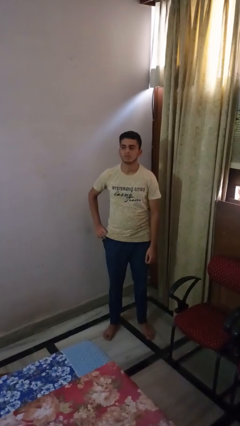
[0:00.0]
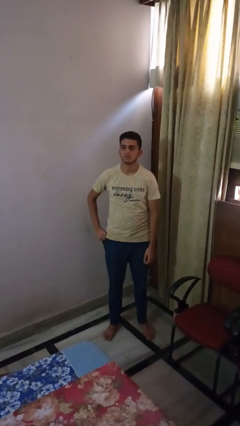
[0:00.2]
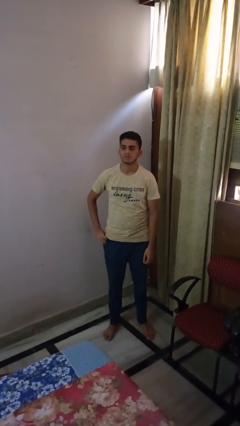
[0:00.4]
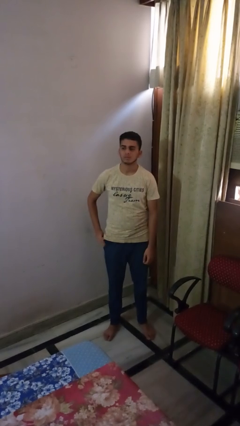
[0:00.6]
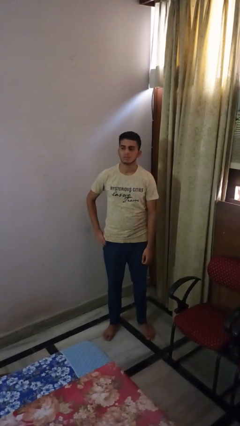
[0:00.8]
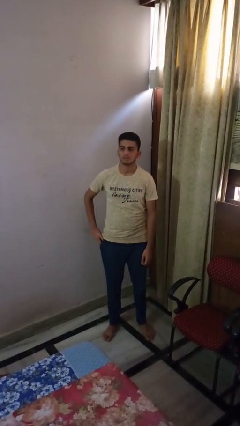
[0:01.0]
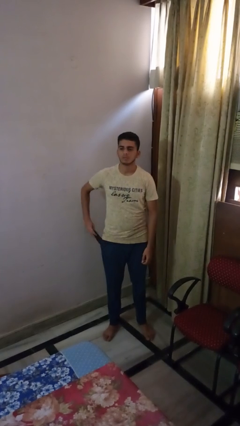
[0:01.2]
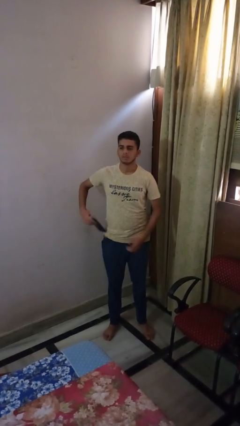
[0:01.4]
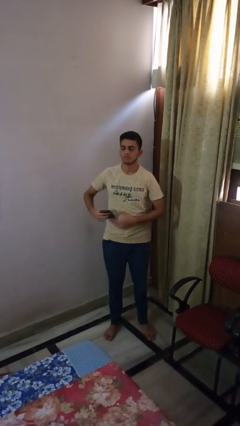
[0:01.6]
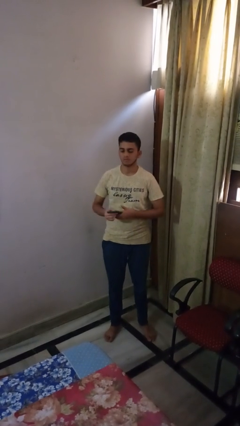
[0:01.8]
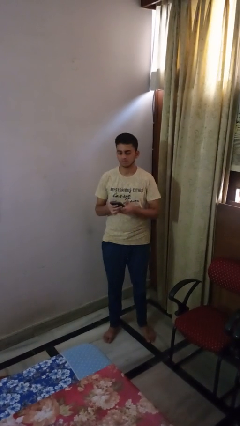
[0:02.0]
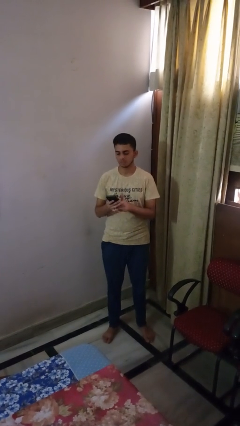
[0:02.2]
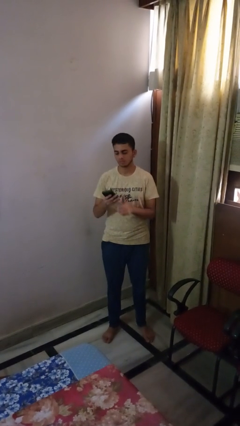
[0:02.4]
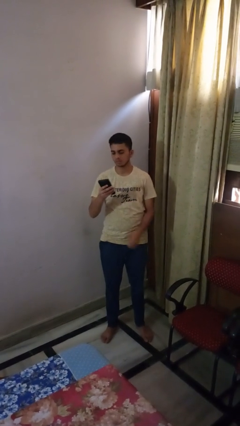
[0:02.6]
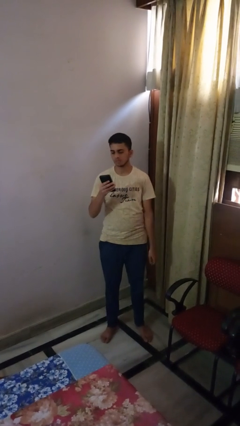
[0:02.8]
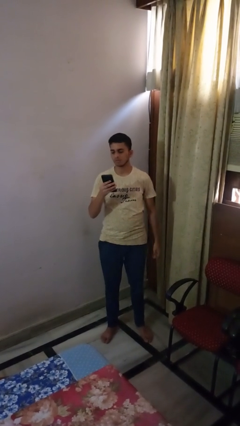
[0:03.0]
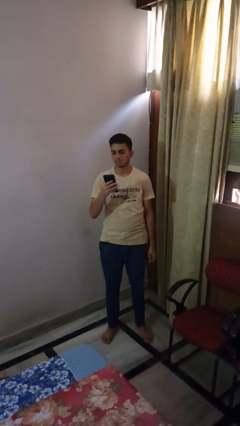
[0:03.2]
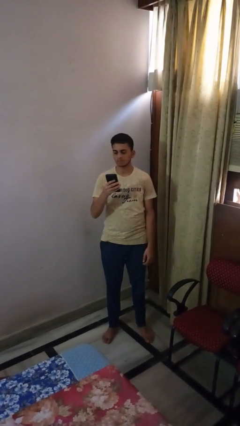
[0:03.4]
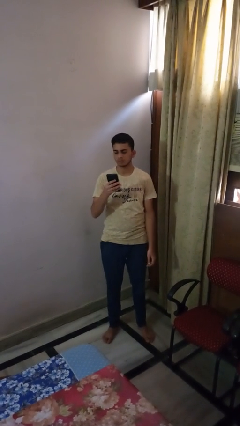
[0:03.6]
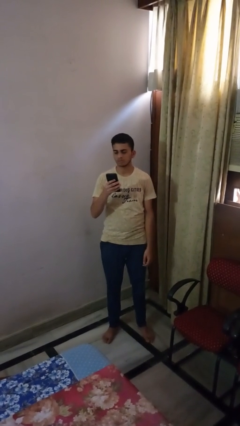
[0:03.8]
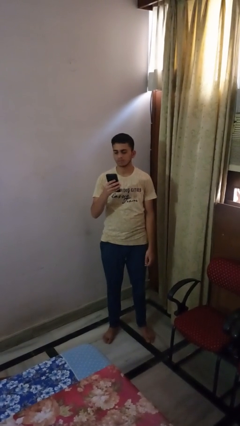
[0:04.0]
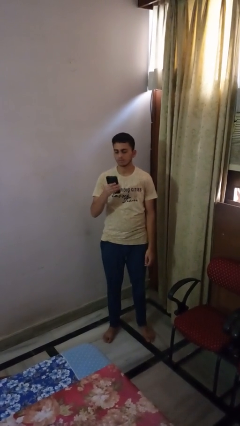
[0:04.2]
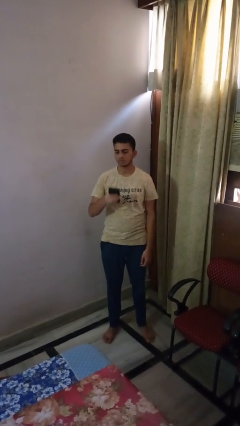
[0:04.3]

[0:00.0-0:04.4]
person takes phone from pocket

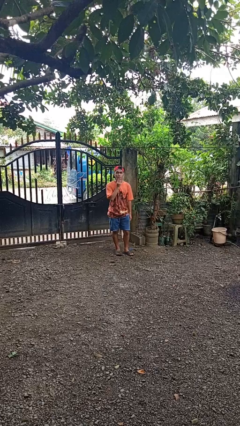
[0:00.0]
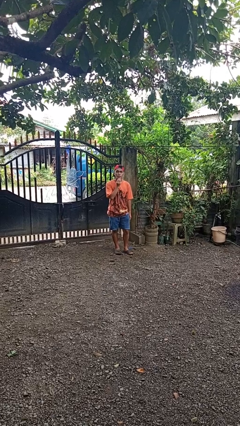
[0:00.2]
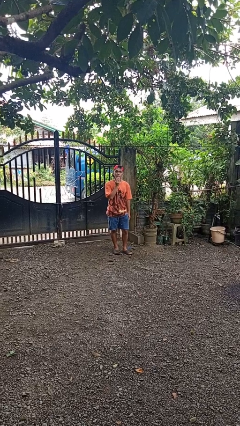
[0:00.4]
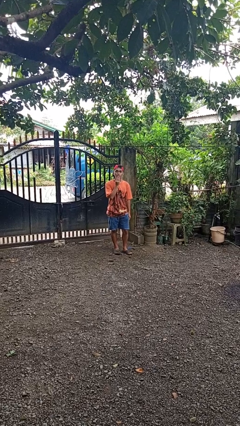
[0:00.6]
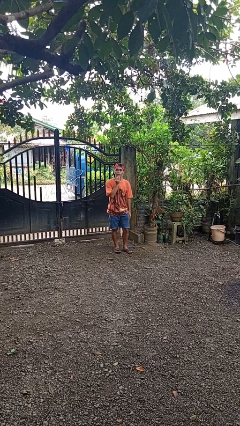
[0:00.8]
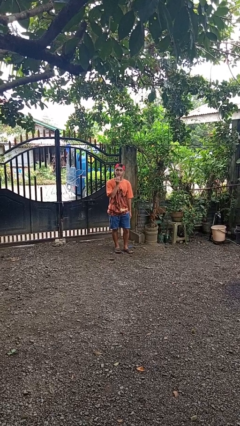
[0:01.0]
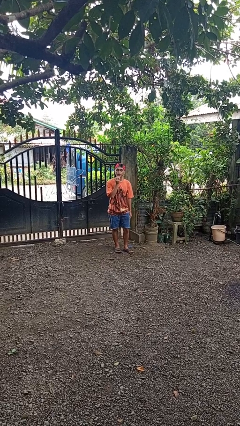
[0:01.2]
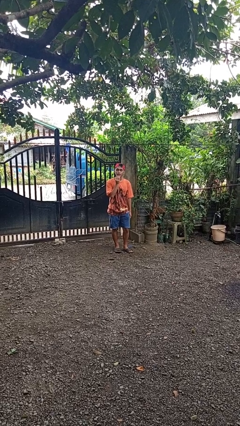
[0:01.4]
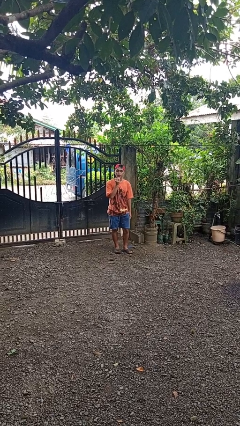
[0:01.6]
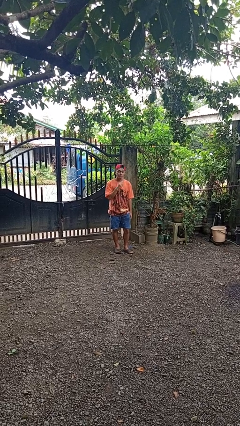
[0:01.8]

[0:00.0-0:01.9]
person strokes chin

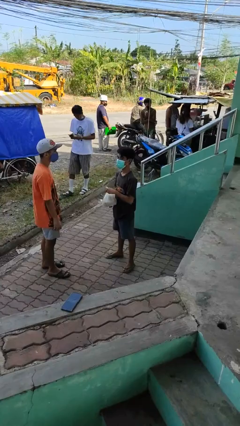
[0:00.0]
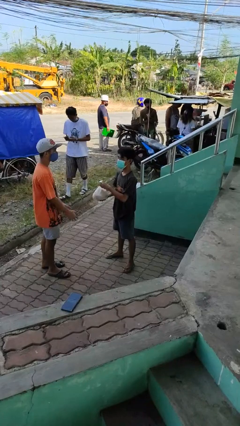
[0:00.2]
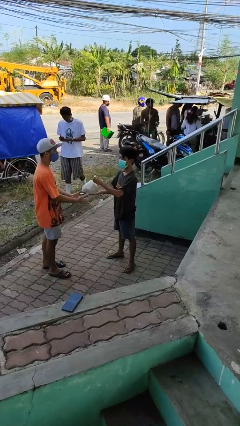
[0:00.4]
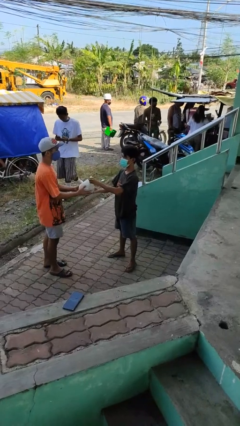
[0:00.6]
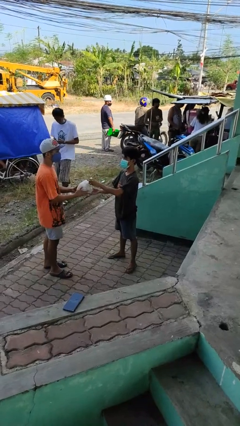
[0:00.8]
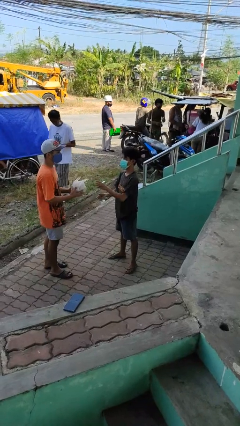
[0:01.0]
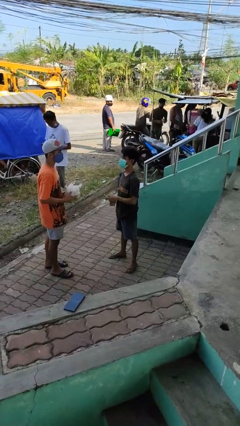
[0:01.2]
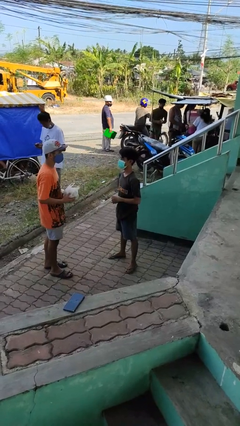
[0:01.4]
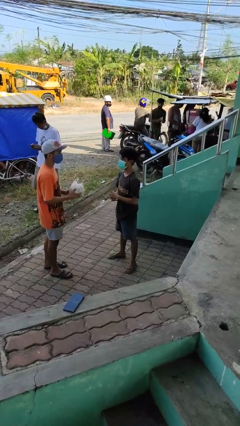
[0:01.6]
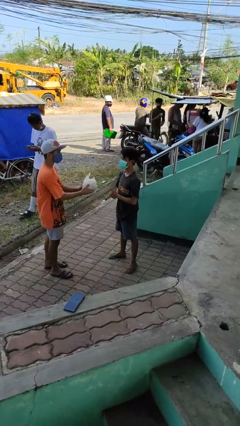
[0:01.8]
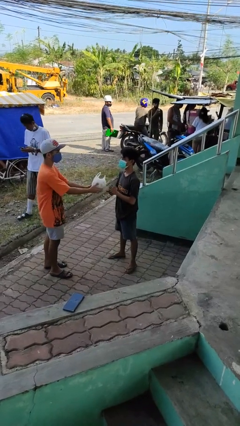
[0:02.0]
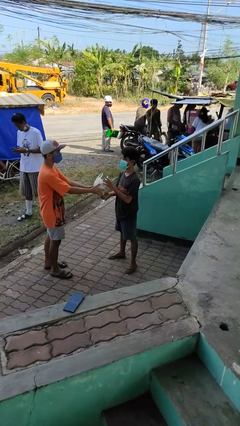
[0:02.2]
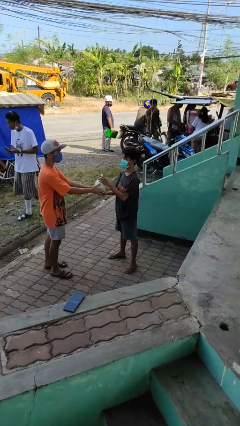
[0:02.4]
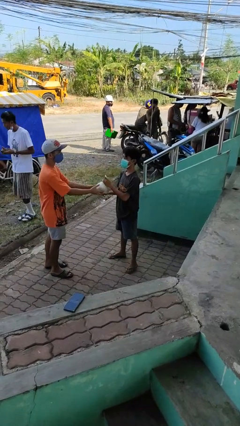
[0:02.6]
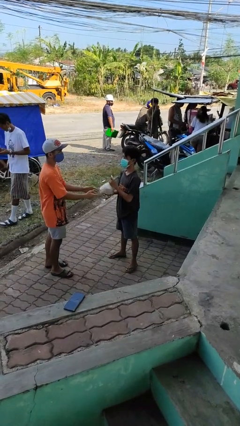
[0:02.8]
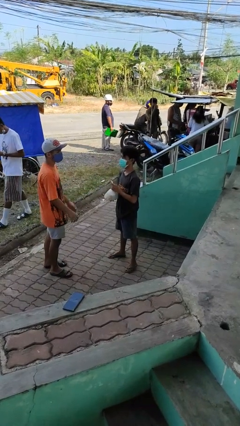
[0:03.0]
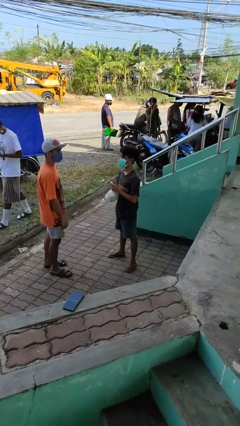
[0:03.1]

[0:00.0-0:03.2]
person transfers object to person

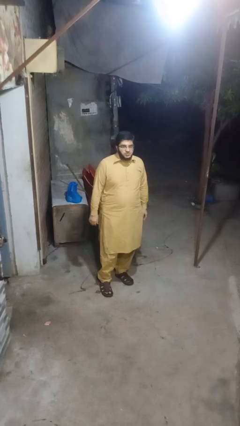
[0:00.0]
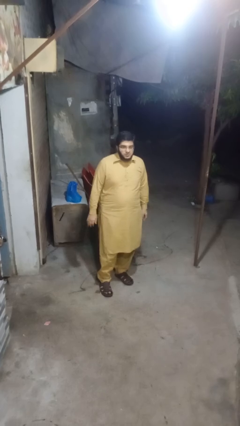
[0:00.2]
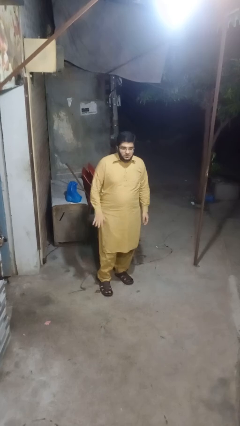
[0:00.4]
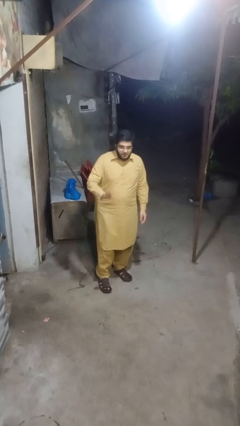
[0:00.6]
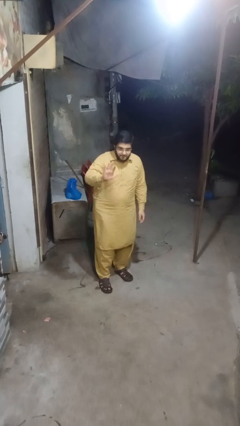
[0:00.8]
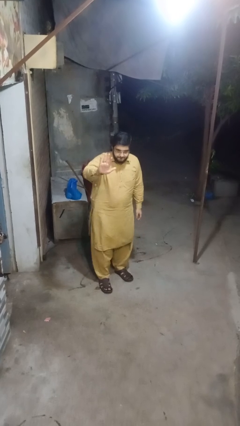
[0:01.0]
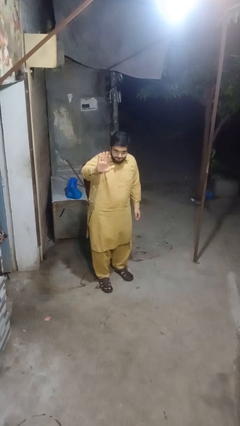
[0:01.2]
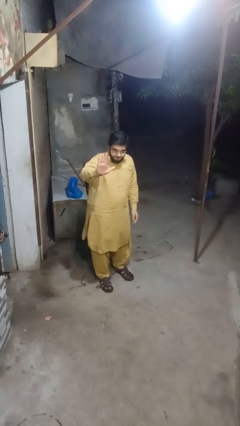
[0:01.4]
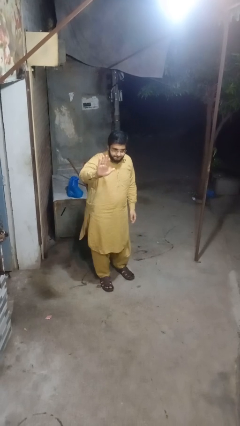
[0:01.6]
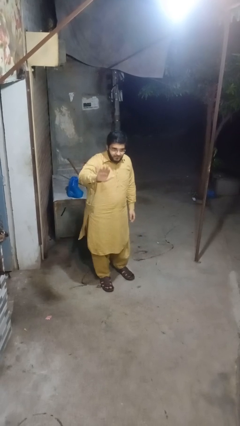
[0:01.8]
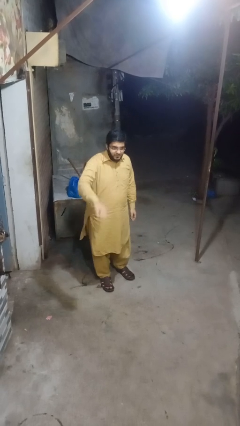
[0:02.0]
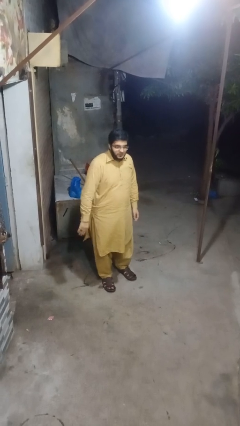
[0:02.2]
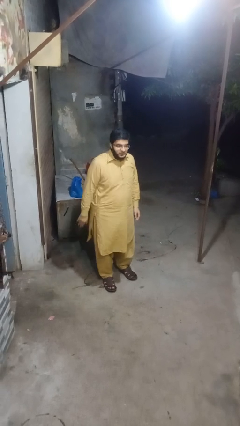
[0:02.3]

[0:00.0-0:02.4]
person gestures stop

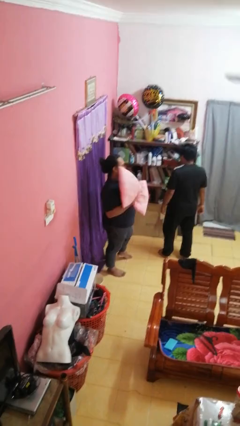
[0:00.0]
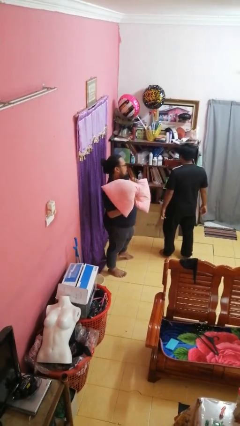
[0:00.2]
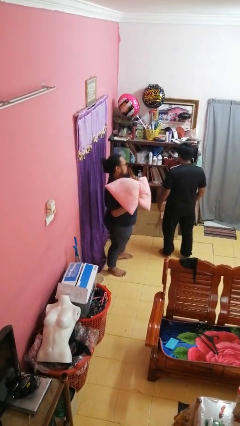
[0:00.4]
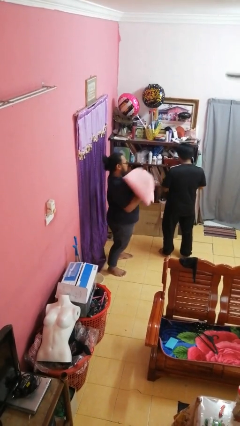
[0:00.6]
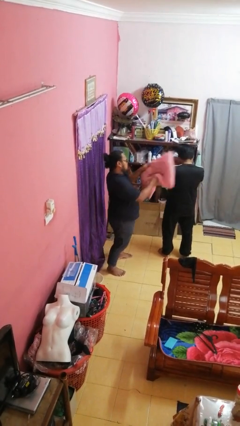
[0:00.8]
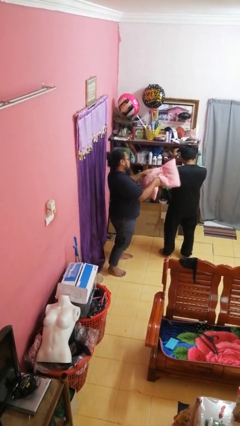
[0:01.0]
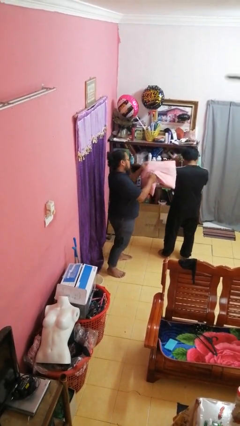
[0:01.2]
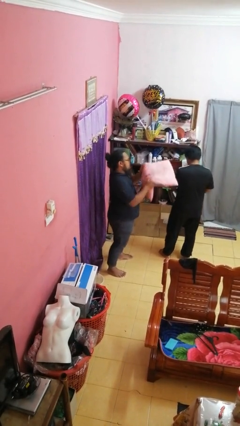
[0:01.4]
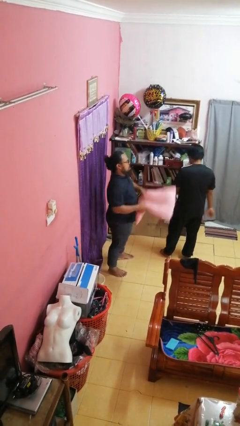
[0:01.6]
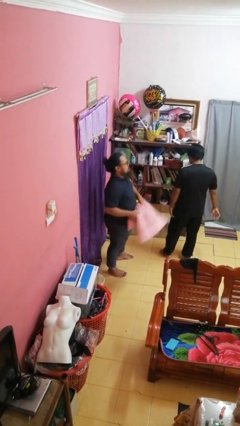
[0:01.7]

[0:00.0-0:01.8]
person hits person with pillow

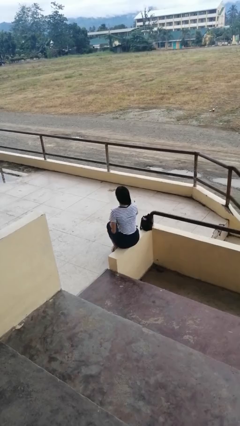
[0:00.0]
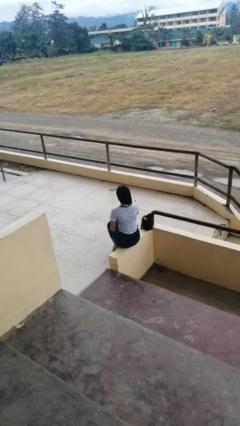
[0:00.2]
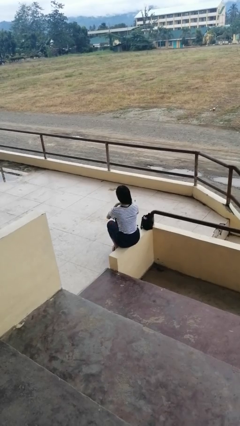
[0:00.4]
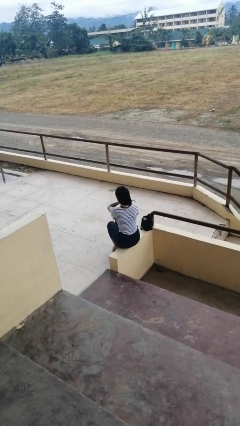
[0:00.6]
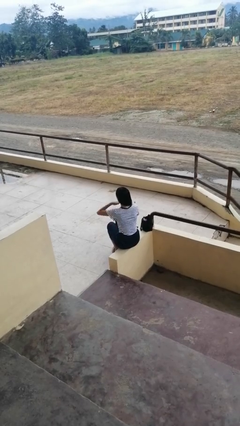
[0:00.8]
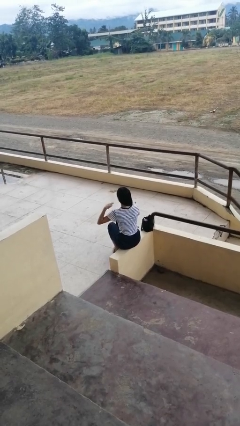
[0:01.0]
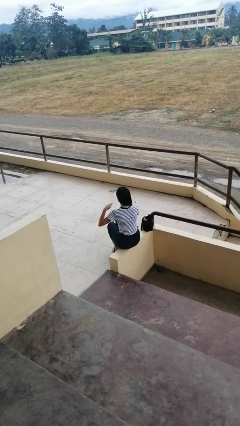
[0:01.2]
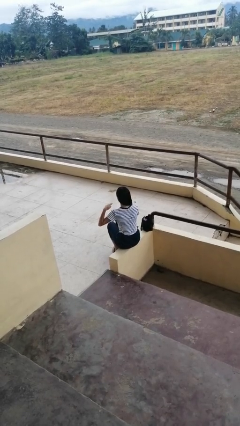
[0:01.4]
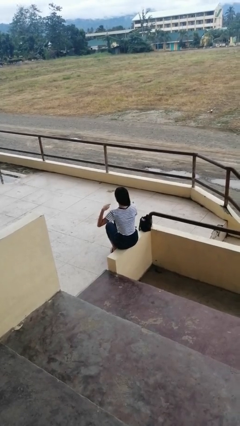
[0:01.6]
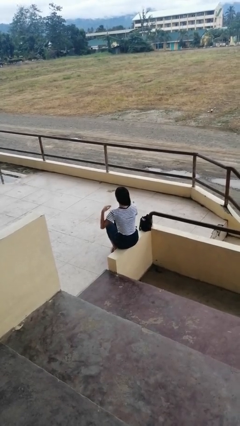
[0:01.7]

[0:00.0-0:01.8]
person gestures cut

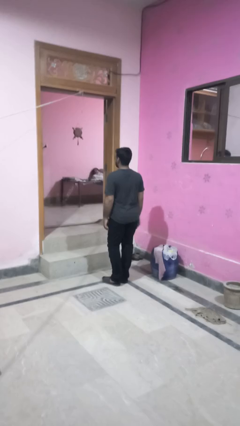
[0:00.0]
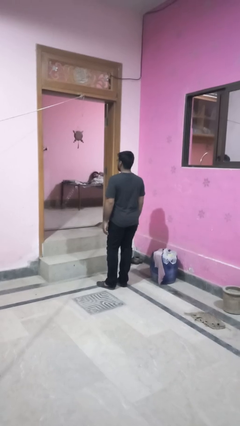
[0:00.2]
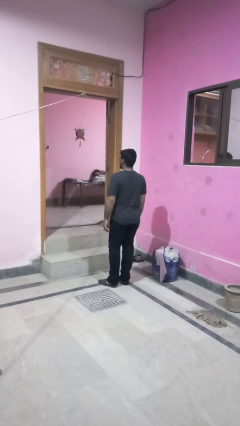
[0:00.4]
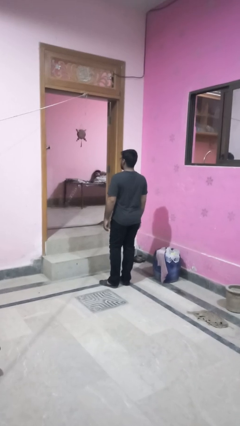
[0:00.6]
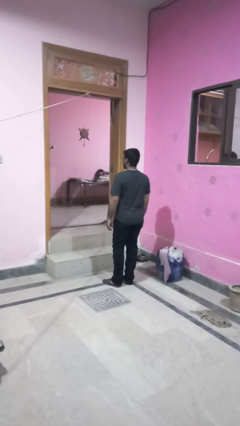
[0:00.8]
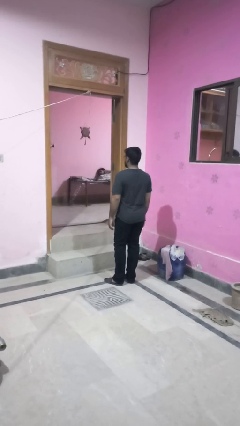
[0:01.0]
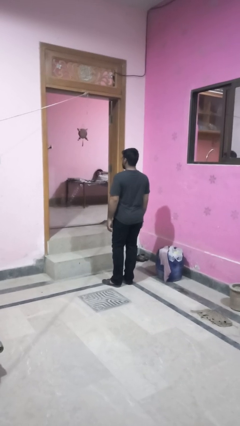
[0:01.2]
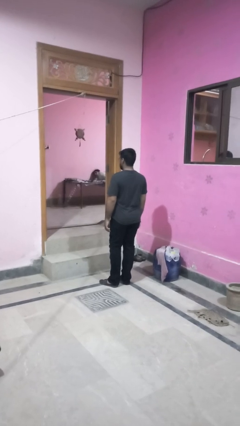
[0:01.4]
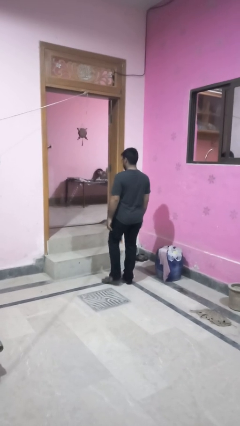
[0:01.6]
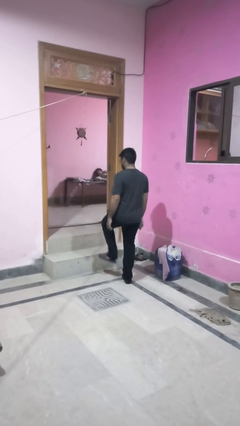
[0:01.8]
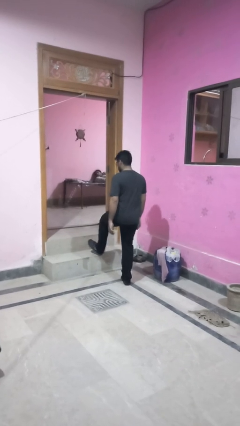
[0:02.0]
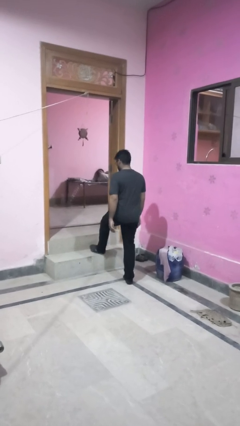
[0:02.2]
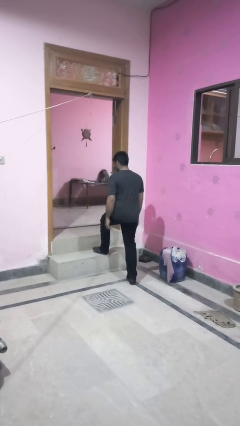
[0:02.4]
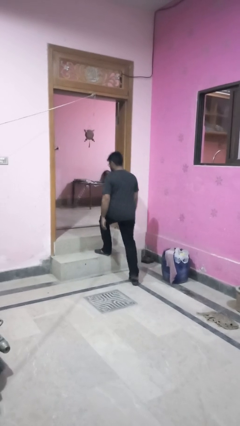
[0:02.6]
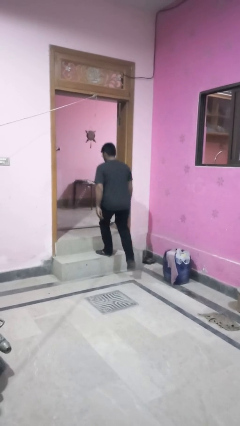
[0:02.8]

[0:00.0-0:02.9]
person puts on necklace
